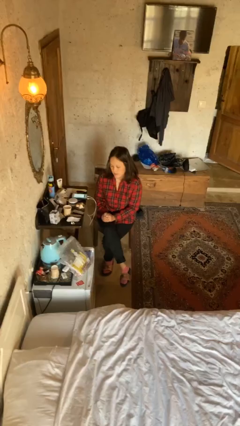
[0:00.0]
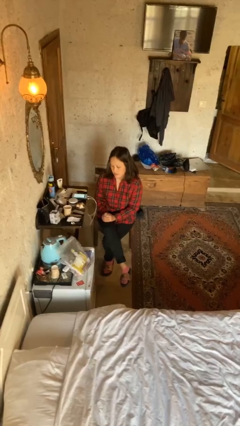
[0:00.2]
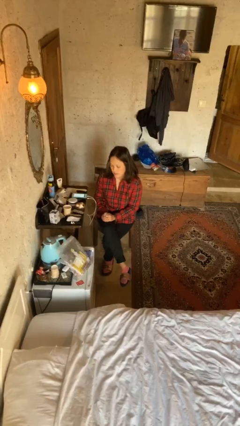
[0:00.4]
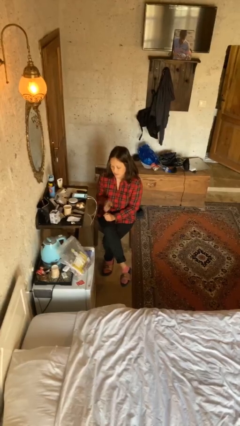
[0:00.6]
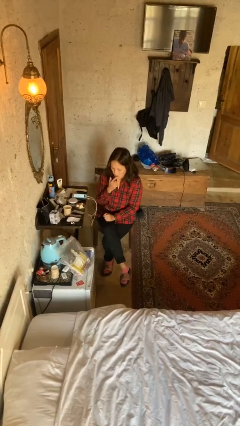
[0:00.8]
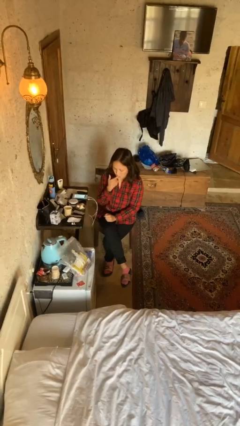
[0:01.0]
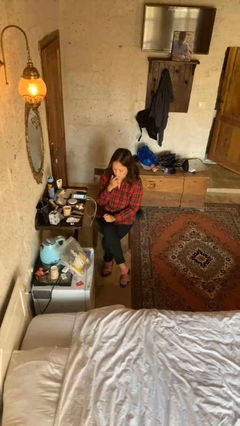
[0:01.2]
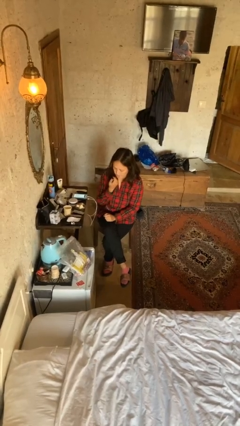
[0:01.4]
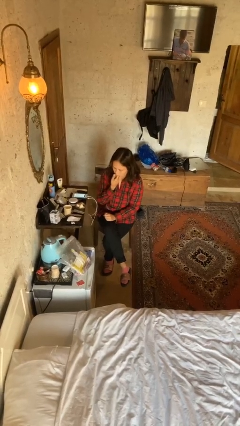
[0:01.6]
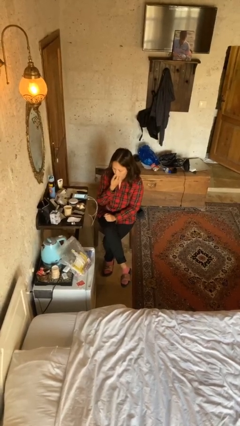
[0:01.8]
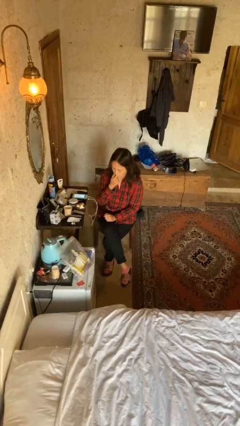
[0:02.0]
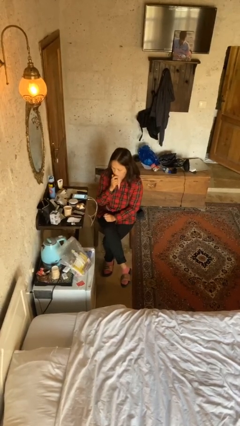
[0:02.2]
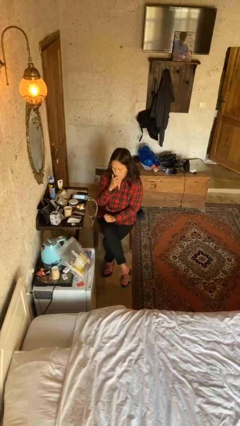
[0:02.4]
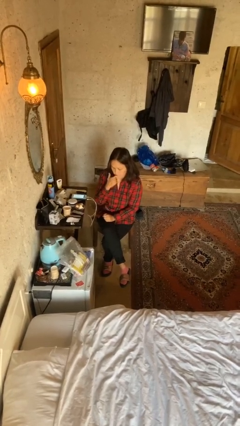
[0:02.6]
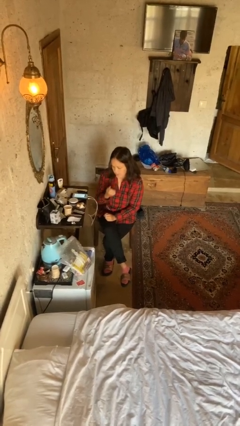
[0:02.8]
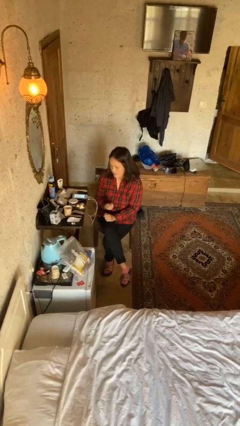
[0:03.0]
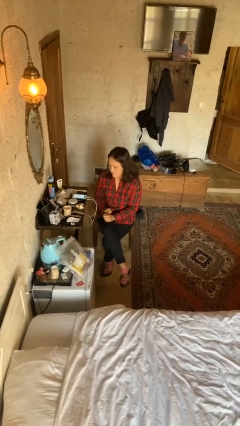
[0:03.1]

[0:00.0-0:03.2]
person licks fingers

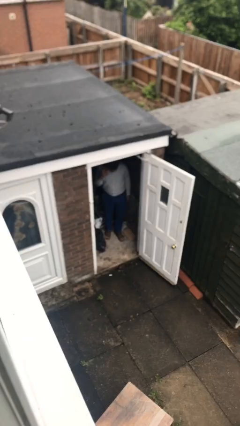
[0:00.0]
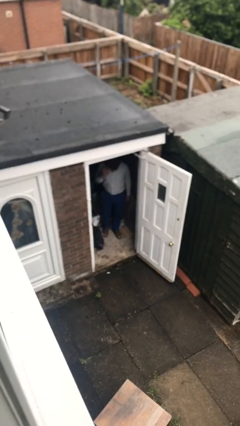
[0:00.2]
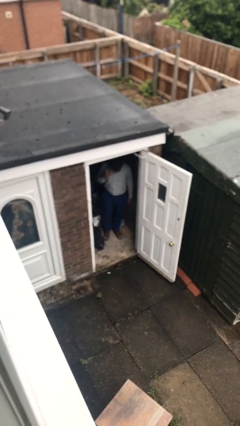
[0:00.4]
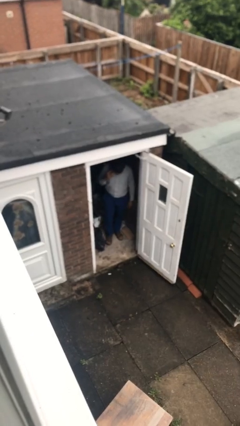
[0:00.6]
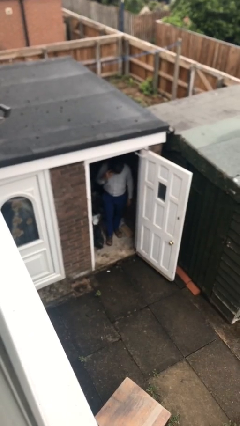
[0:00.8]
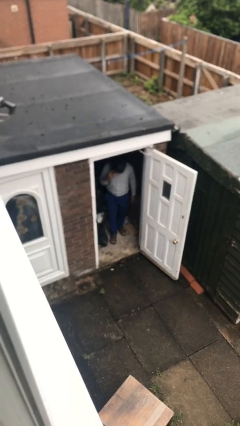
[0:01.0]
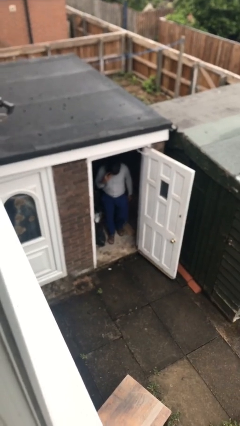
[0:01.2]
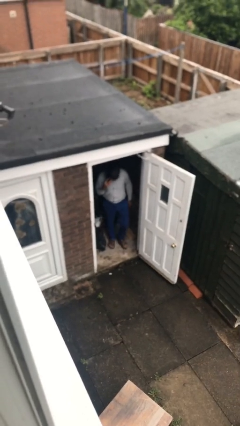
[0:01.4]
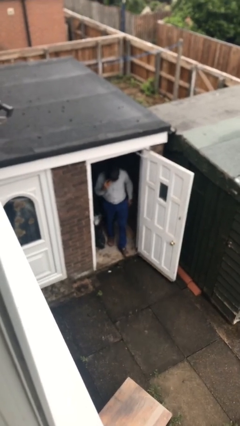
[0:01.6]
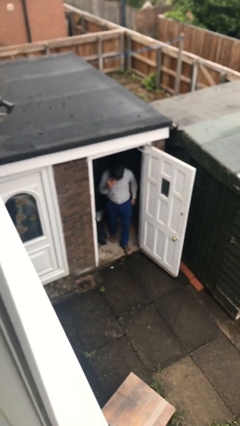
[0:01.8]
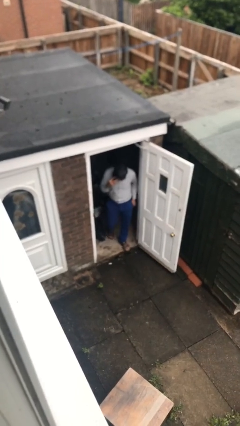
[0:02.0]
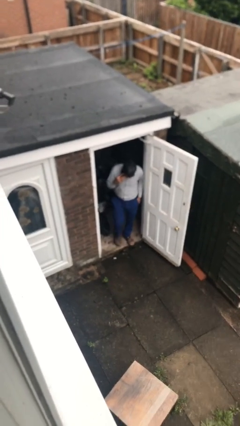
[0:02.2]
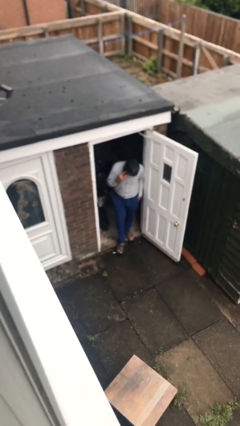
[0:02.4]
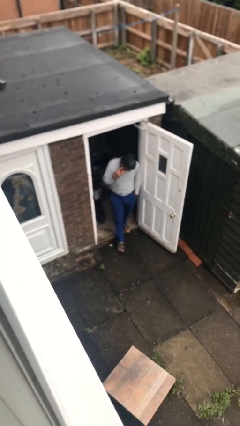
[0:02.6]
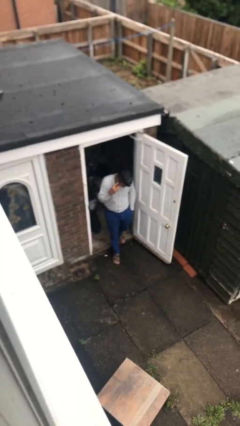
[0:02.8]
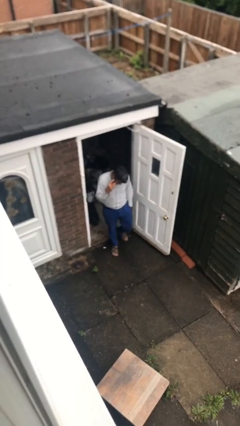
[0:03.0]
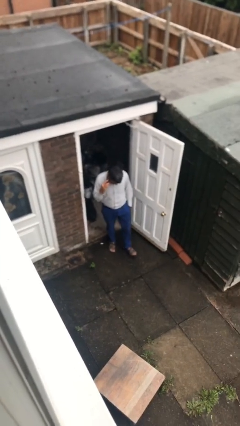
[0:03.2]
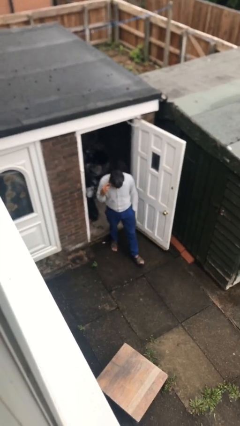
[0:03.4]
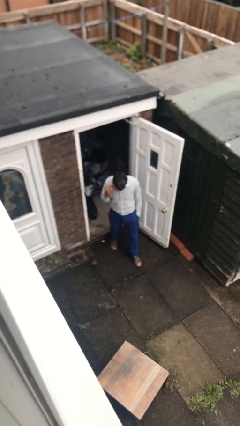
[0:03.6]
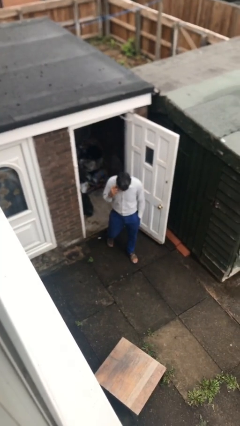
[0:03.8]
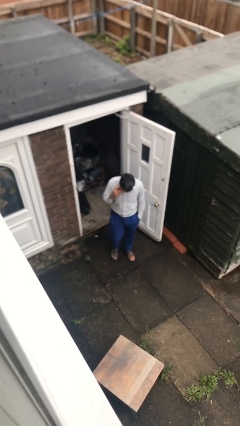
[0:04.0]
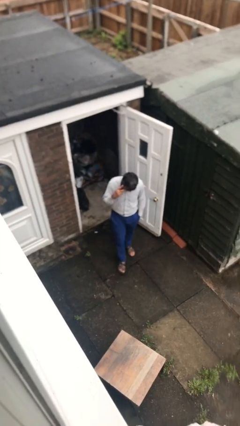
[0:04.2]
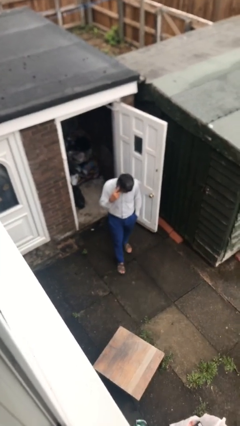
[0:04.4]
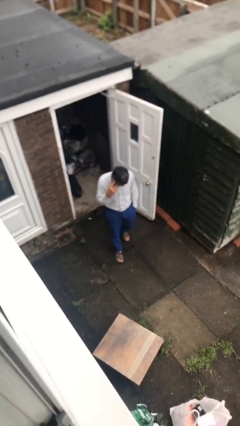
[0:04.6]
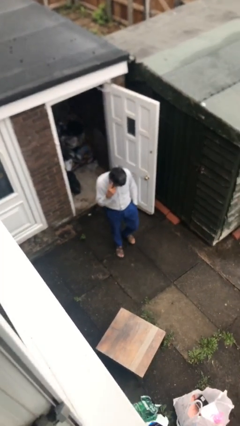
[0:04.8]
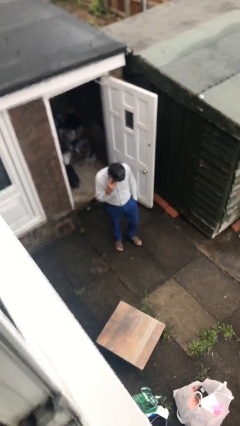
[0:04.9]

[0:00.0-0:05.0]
person enters scene through structure

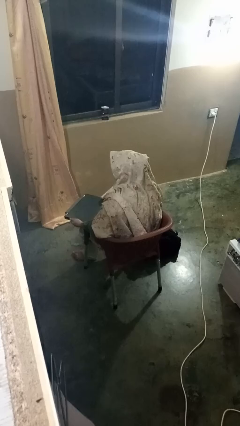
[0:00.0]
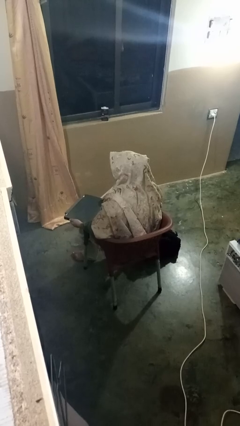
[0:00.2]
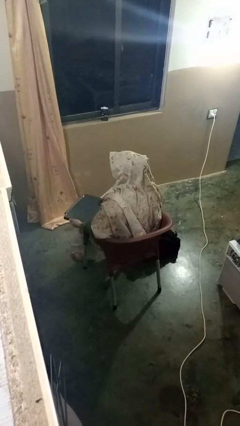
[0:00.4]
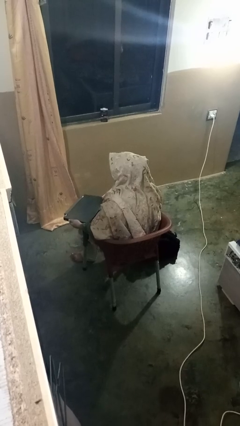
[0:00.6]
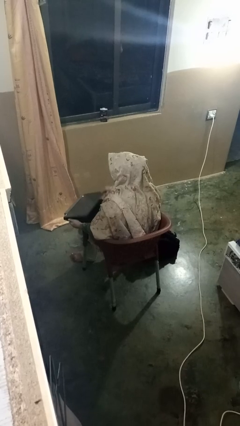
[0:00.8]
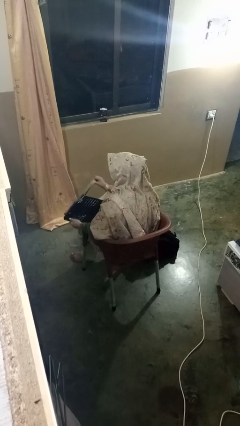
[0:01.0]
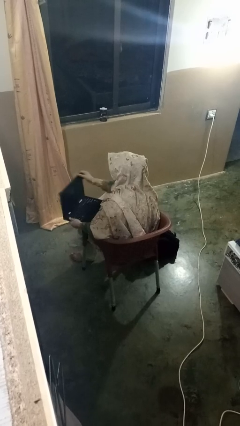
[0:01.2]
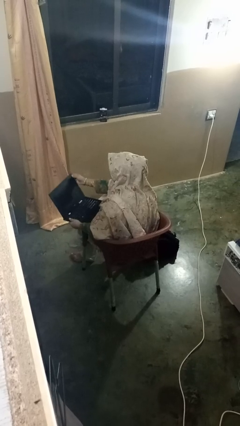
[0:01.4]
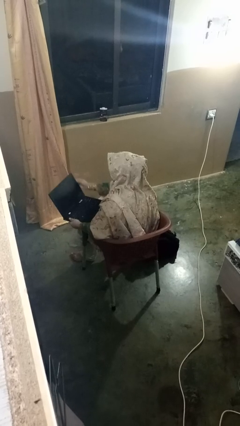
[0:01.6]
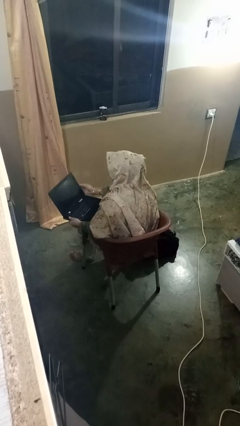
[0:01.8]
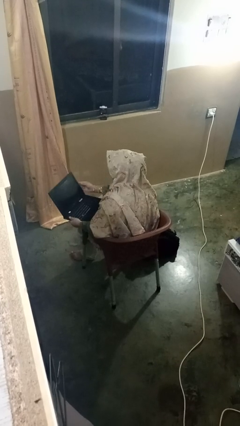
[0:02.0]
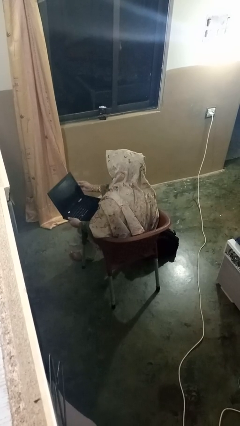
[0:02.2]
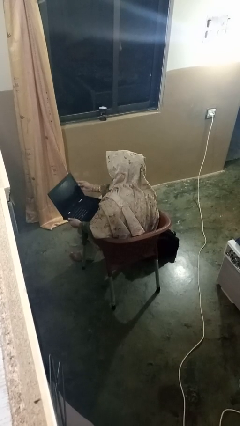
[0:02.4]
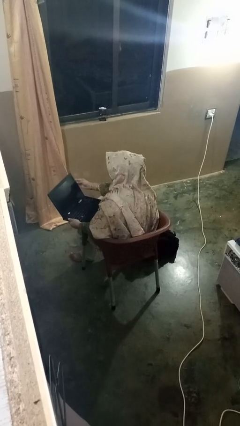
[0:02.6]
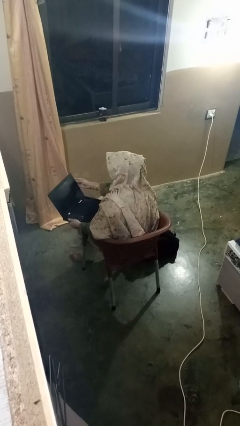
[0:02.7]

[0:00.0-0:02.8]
person opens laptop

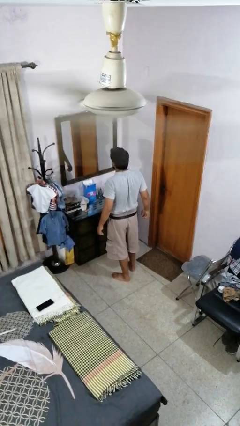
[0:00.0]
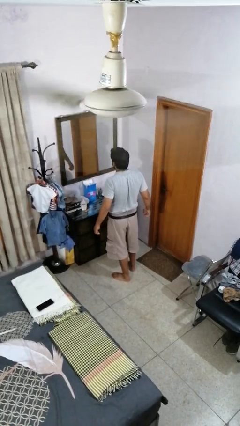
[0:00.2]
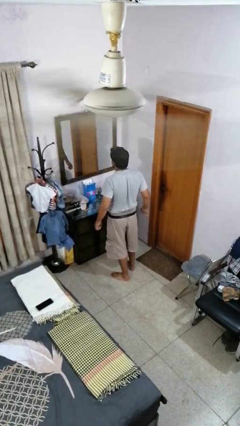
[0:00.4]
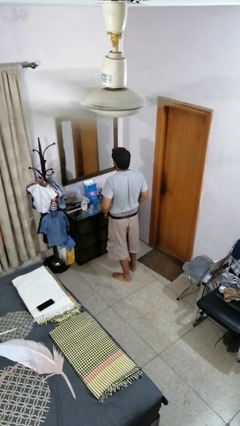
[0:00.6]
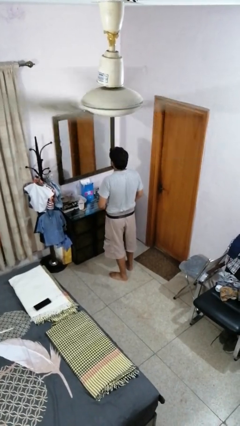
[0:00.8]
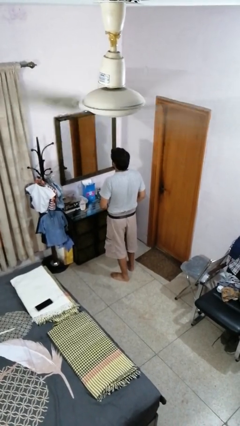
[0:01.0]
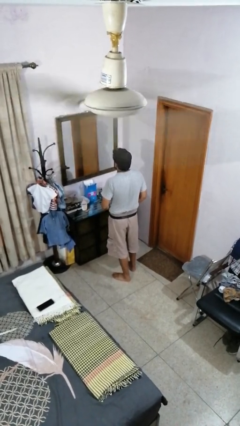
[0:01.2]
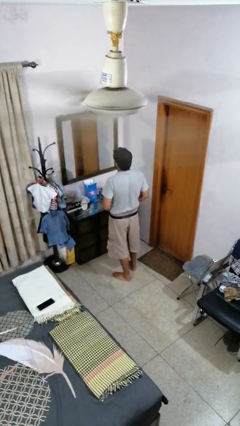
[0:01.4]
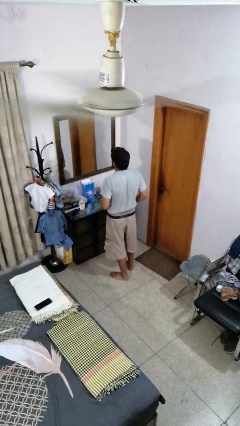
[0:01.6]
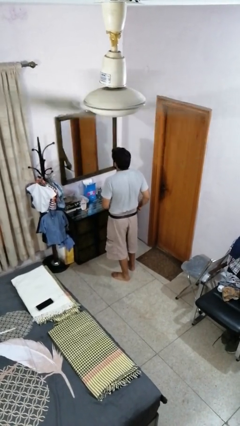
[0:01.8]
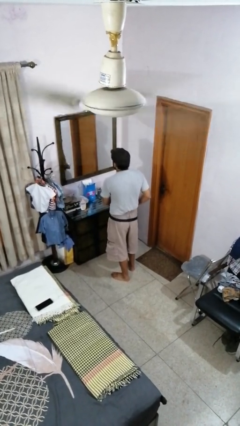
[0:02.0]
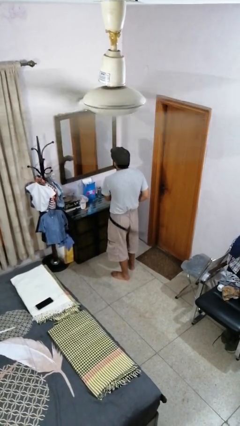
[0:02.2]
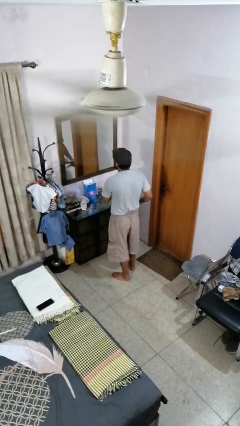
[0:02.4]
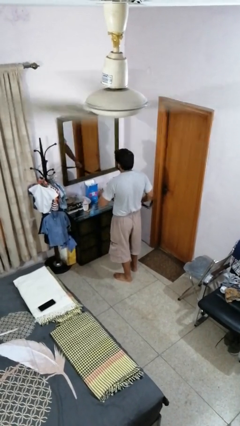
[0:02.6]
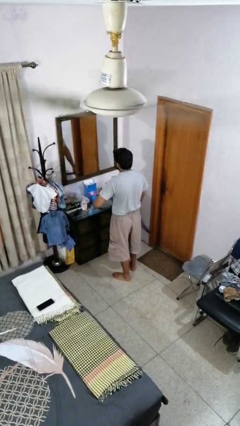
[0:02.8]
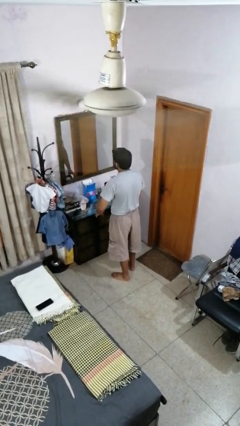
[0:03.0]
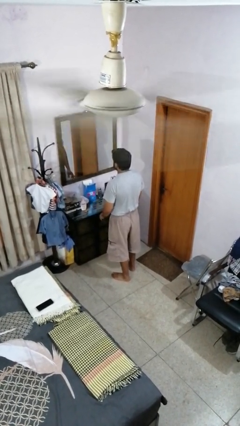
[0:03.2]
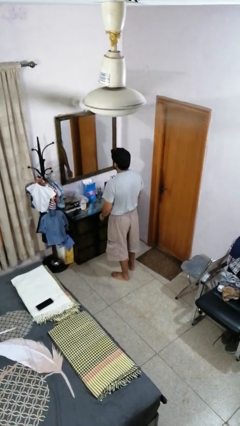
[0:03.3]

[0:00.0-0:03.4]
person takes off belt

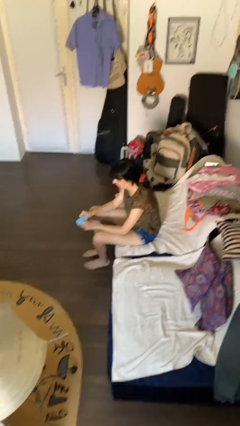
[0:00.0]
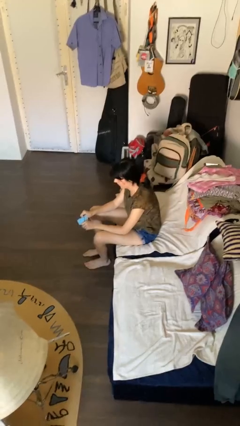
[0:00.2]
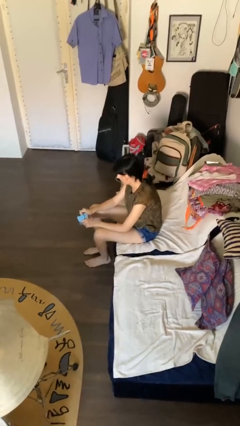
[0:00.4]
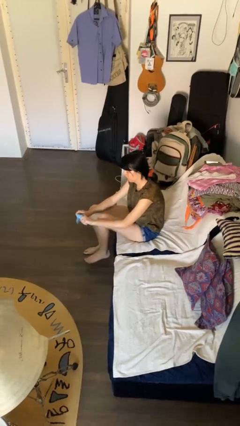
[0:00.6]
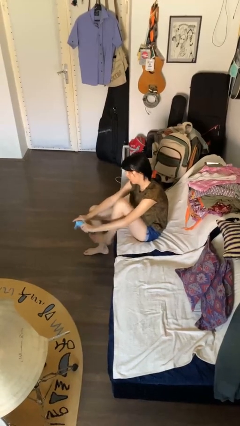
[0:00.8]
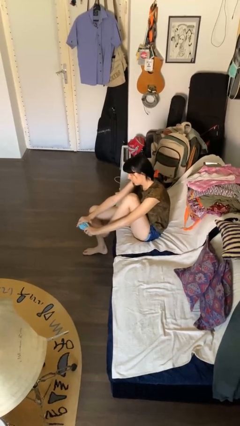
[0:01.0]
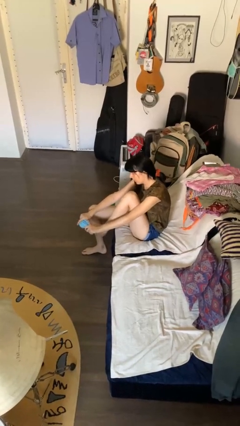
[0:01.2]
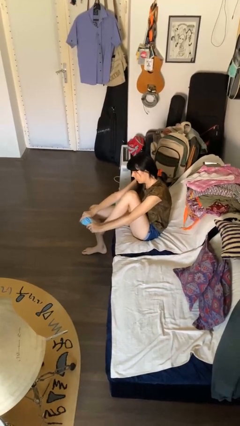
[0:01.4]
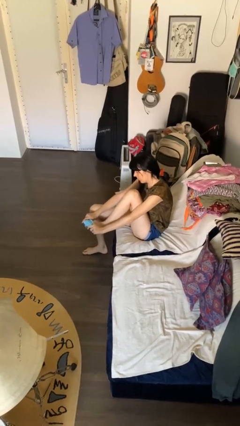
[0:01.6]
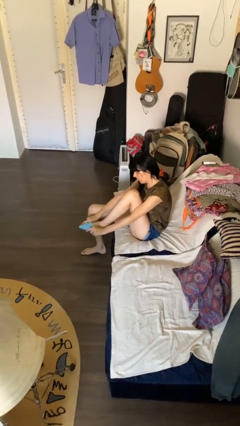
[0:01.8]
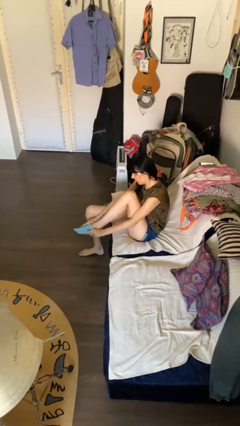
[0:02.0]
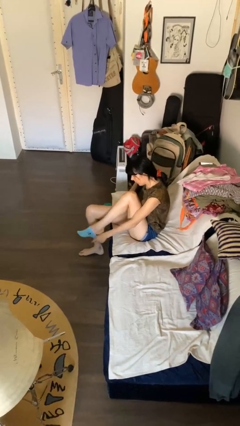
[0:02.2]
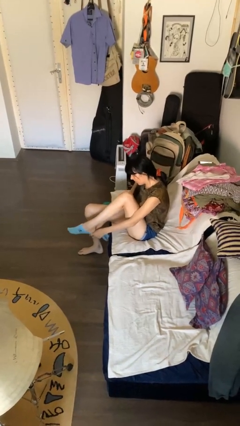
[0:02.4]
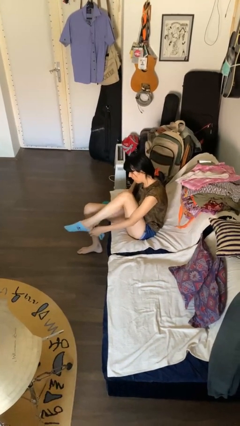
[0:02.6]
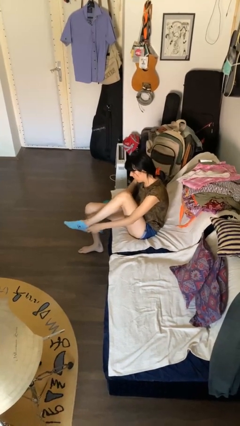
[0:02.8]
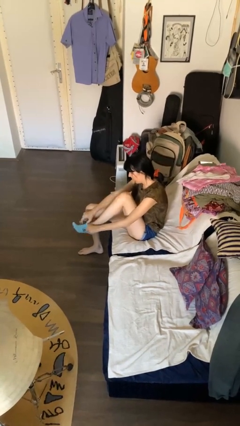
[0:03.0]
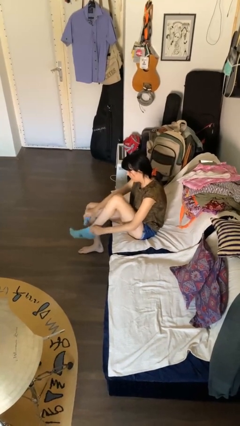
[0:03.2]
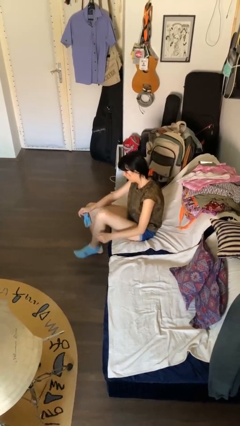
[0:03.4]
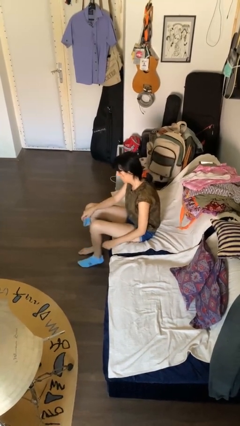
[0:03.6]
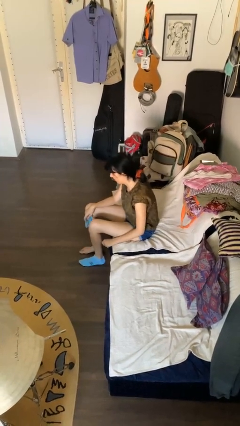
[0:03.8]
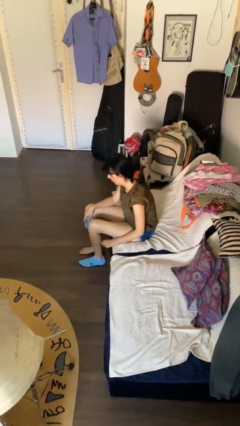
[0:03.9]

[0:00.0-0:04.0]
person puts on socks
